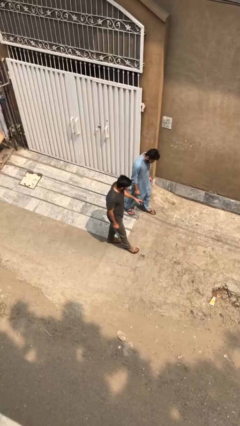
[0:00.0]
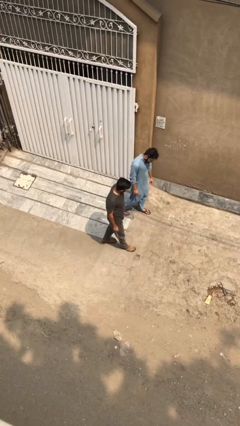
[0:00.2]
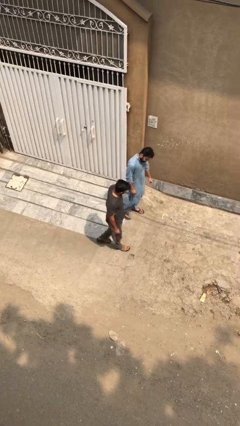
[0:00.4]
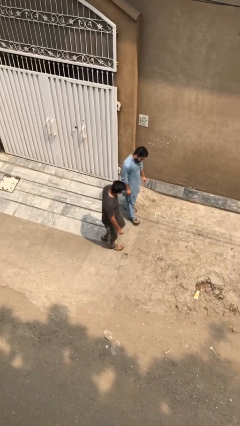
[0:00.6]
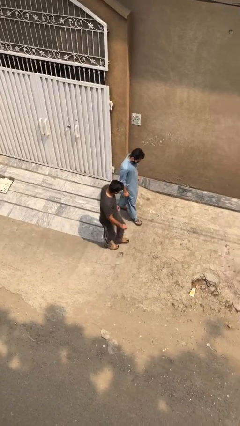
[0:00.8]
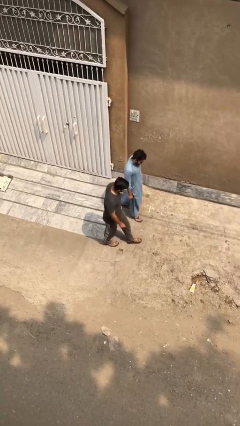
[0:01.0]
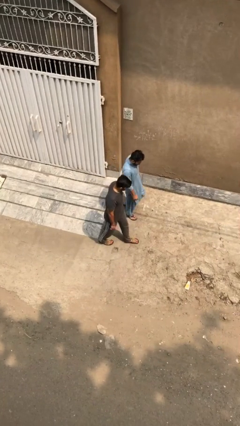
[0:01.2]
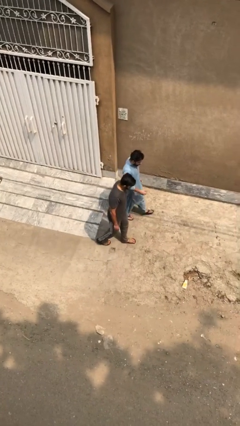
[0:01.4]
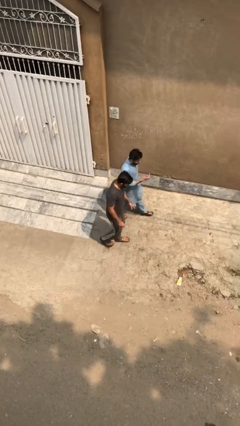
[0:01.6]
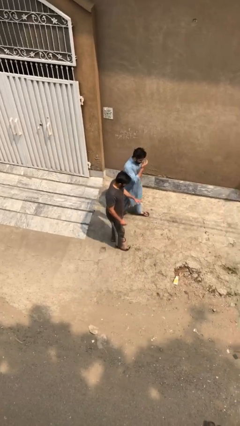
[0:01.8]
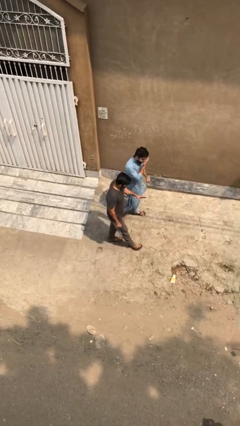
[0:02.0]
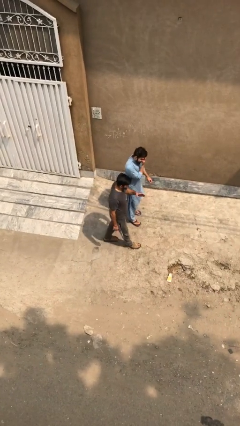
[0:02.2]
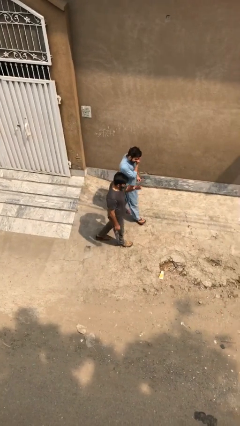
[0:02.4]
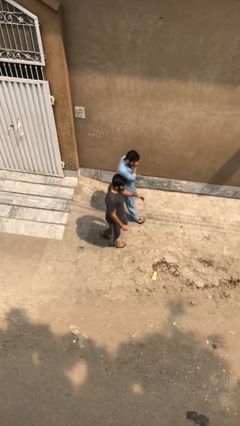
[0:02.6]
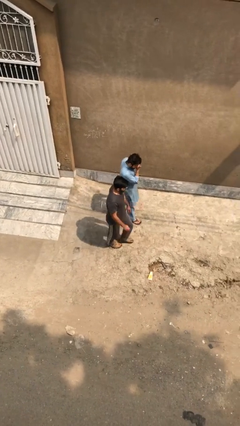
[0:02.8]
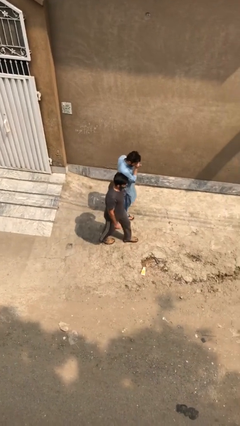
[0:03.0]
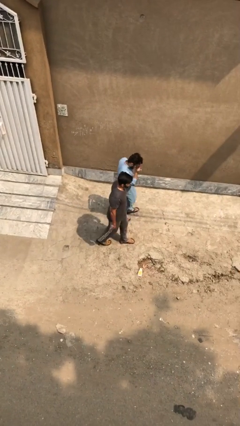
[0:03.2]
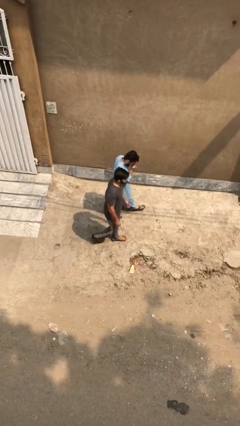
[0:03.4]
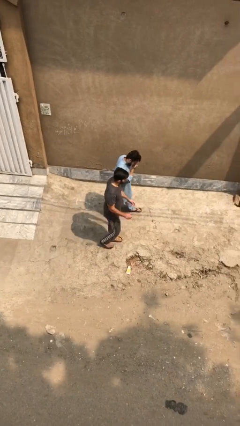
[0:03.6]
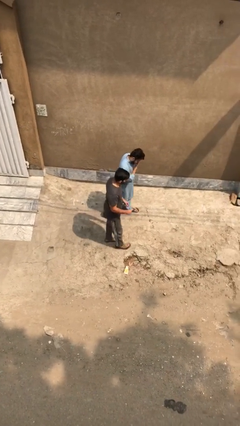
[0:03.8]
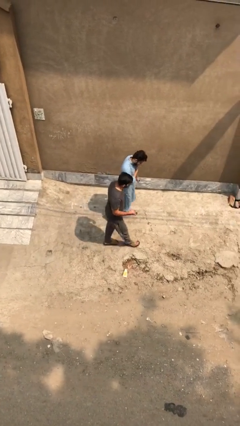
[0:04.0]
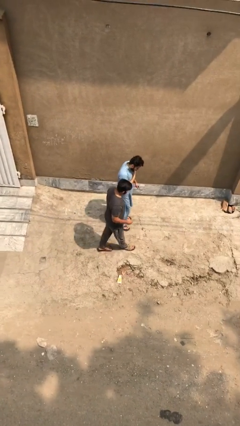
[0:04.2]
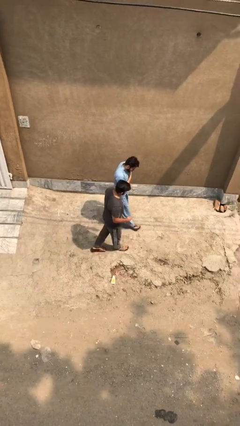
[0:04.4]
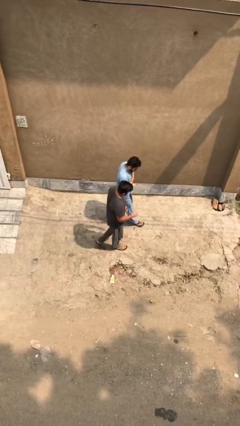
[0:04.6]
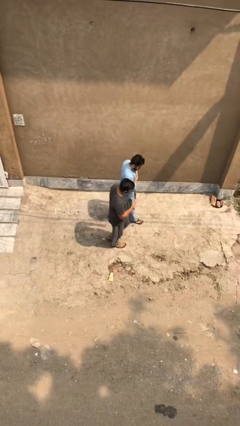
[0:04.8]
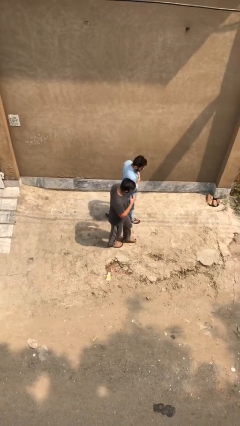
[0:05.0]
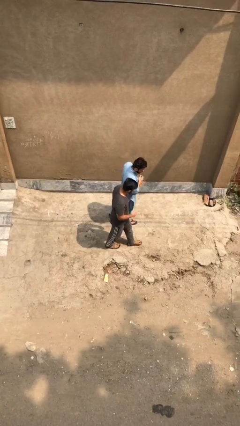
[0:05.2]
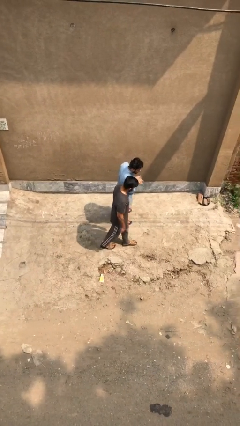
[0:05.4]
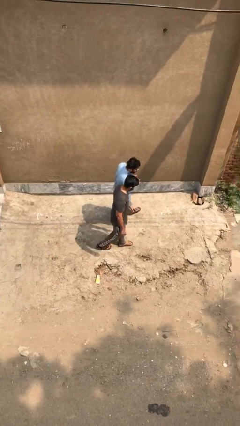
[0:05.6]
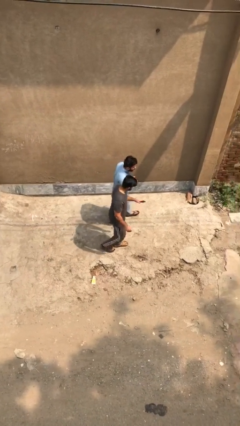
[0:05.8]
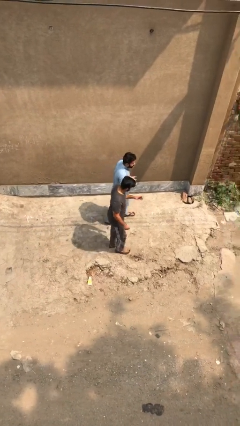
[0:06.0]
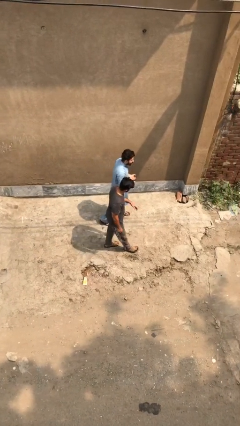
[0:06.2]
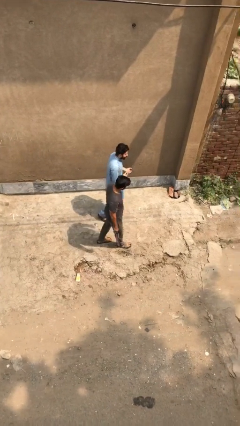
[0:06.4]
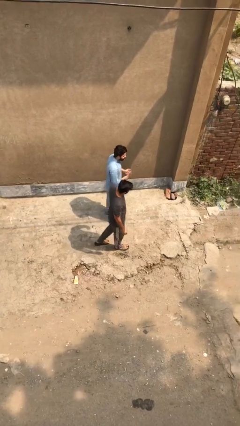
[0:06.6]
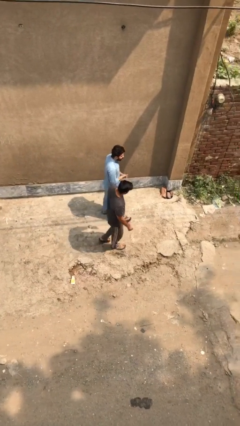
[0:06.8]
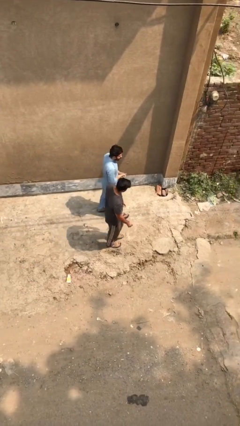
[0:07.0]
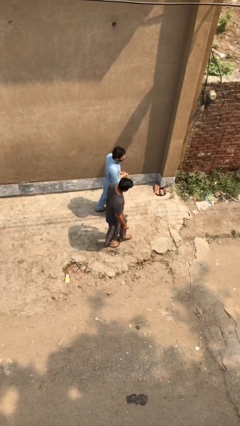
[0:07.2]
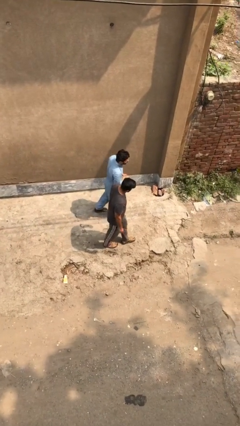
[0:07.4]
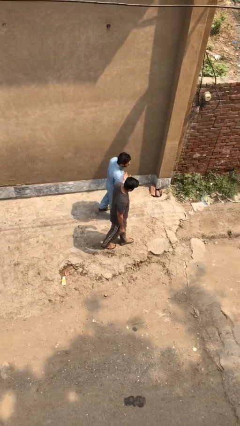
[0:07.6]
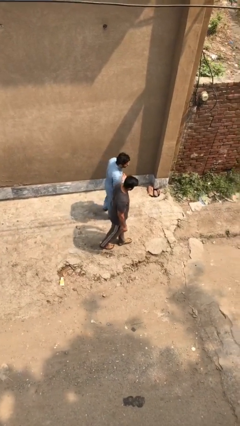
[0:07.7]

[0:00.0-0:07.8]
person talks to person

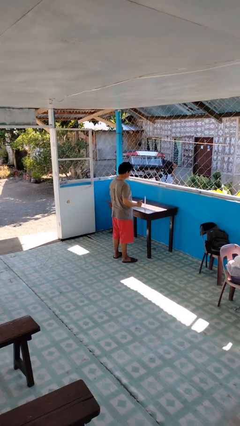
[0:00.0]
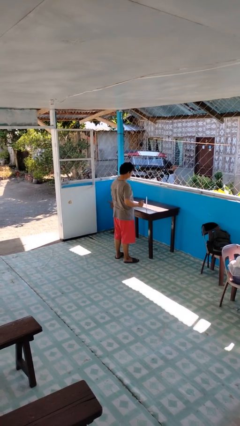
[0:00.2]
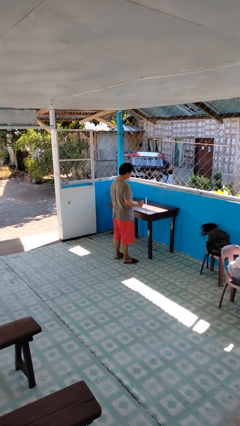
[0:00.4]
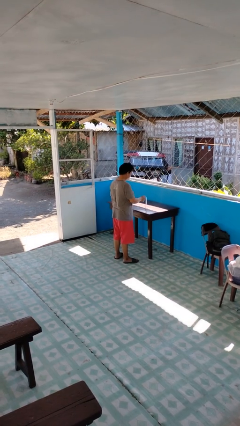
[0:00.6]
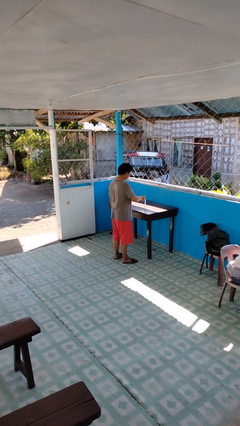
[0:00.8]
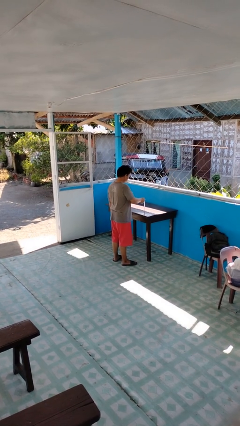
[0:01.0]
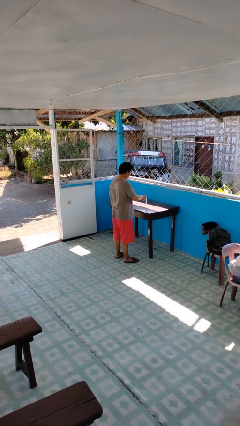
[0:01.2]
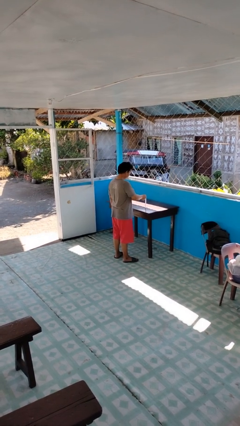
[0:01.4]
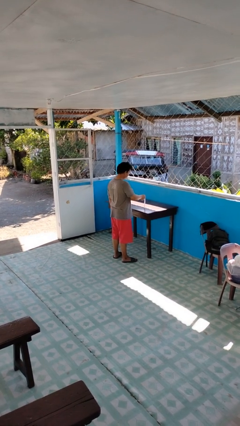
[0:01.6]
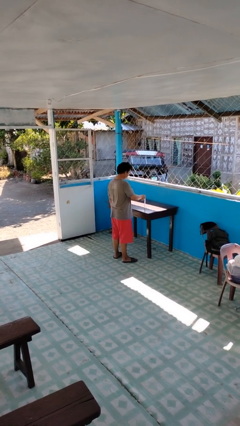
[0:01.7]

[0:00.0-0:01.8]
person lights candle

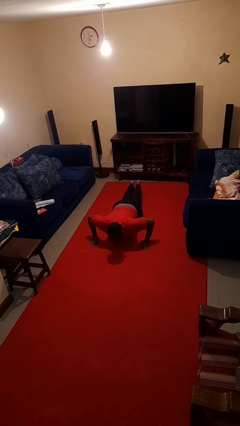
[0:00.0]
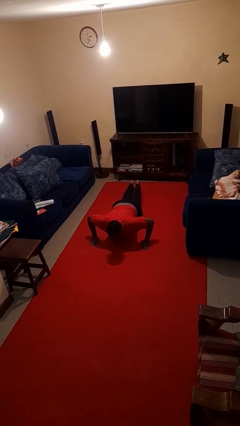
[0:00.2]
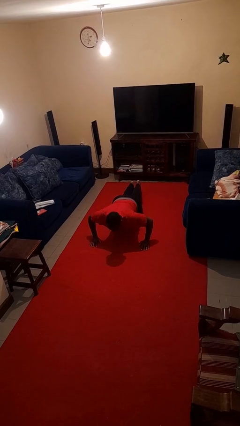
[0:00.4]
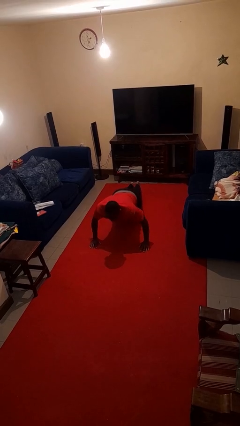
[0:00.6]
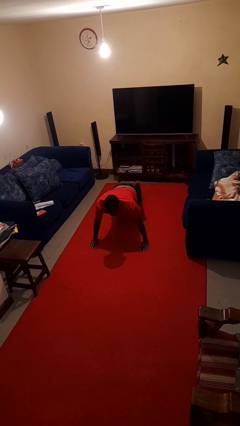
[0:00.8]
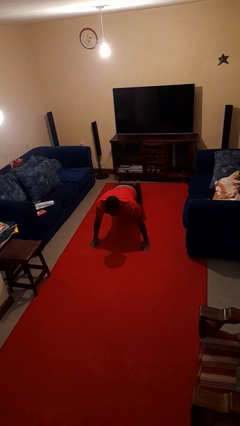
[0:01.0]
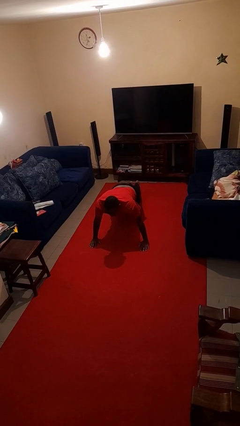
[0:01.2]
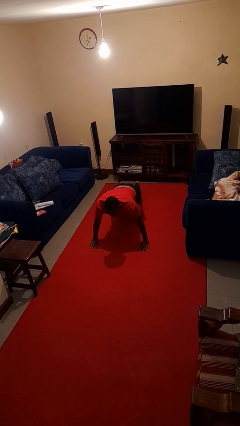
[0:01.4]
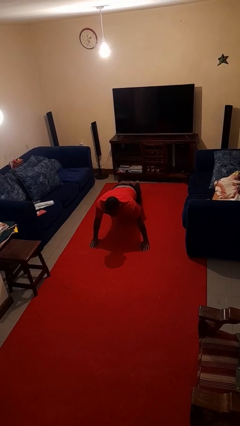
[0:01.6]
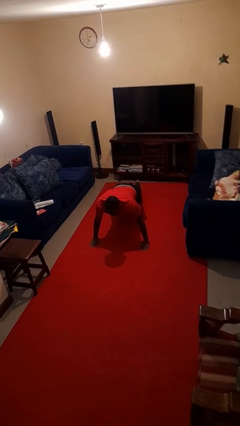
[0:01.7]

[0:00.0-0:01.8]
person exercises with pushup

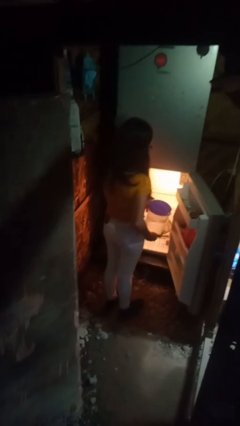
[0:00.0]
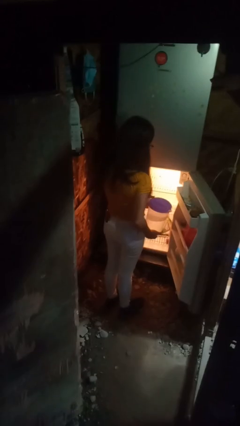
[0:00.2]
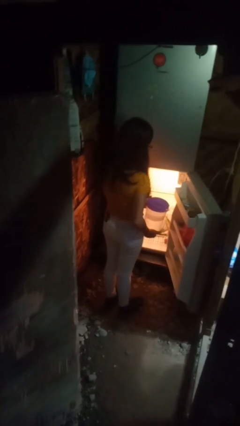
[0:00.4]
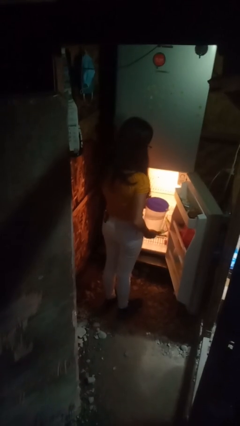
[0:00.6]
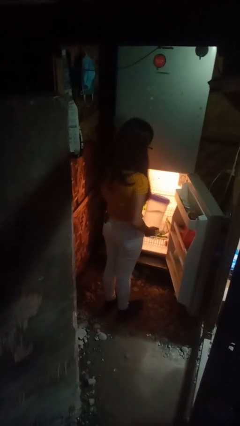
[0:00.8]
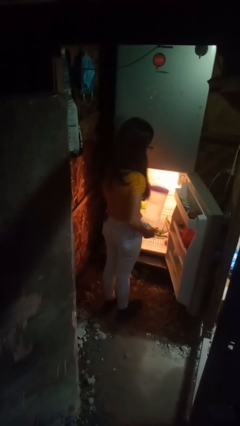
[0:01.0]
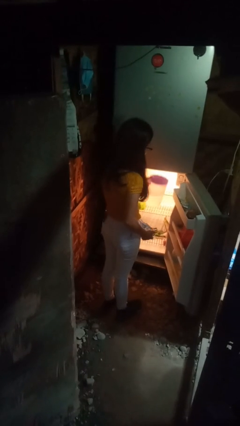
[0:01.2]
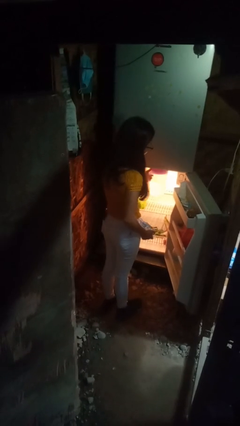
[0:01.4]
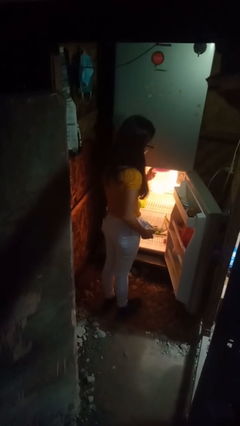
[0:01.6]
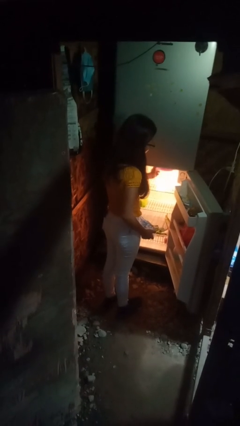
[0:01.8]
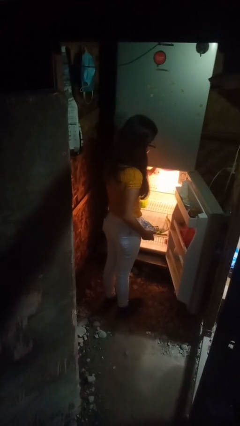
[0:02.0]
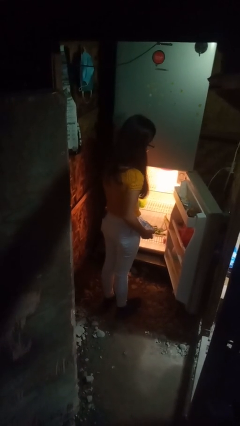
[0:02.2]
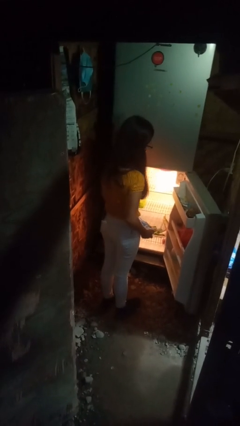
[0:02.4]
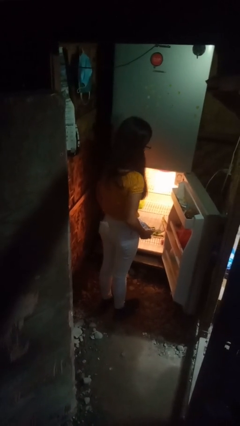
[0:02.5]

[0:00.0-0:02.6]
person puts object into refrigerator

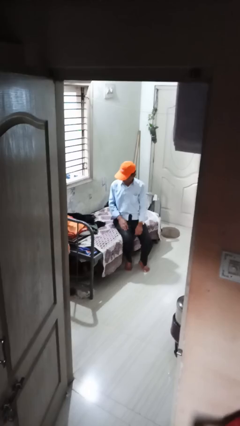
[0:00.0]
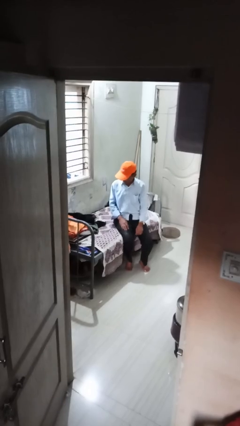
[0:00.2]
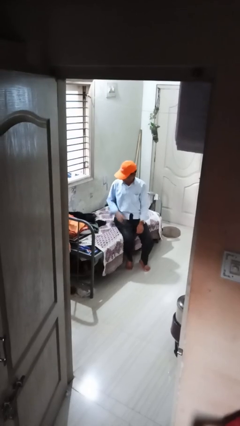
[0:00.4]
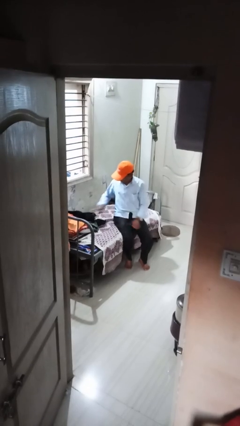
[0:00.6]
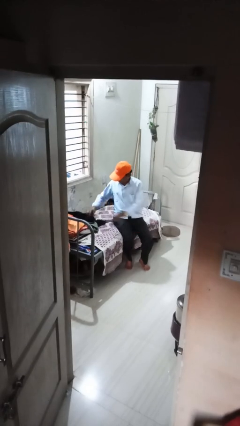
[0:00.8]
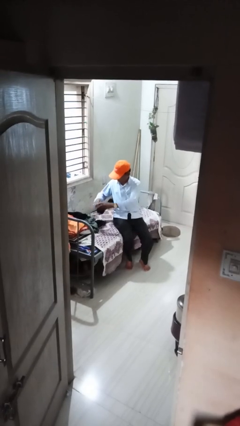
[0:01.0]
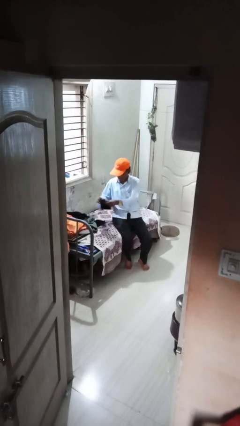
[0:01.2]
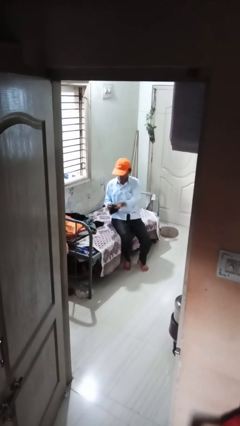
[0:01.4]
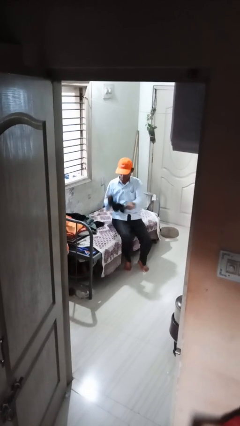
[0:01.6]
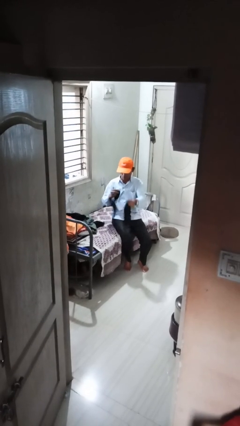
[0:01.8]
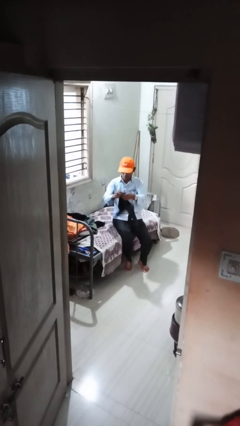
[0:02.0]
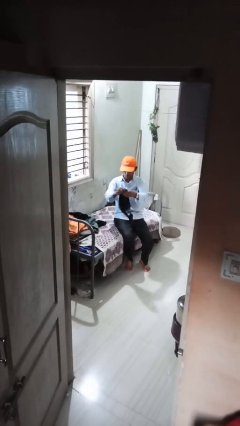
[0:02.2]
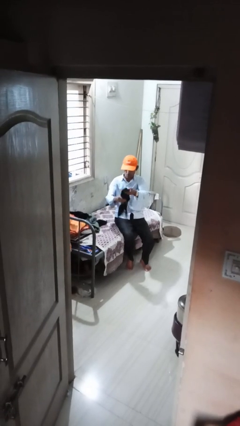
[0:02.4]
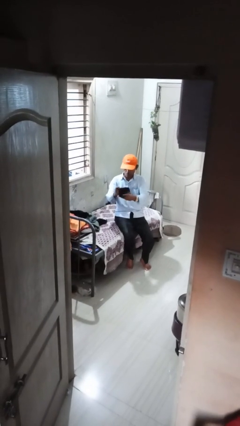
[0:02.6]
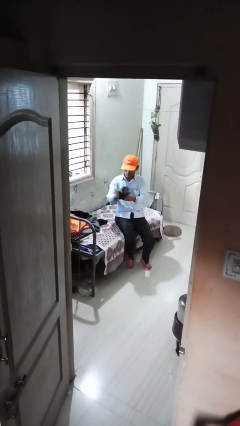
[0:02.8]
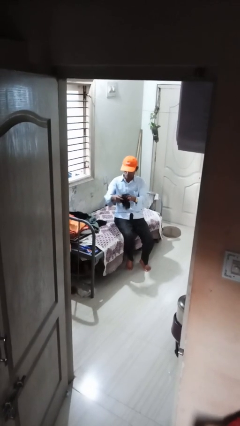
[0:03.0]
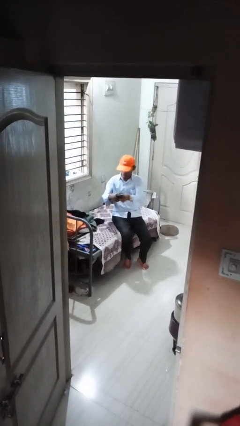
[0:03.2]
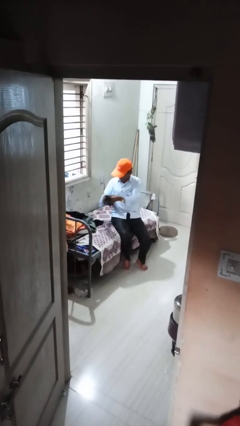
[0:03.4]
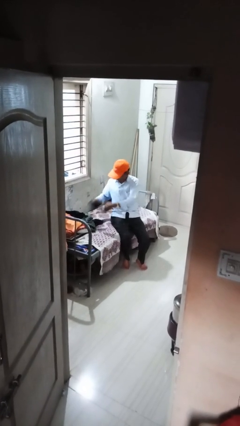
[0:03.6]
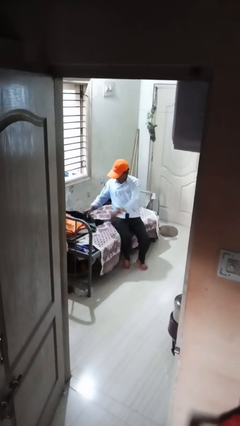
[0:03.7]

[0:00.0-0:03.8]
person folds socks
